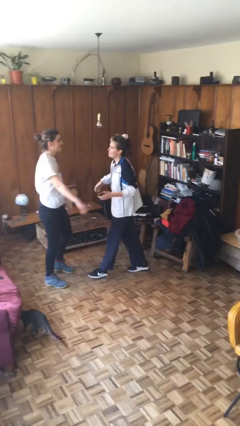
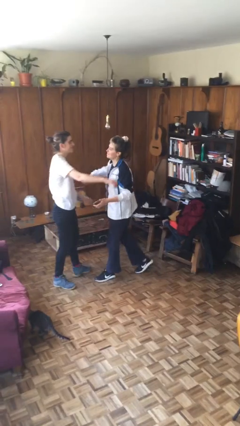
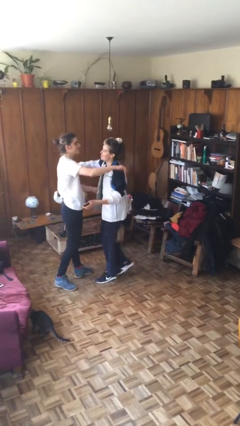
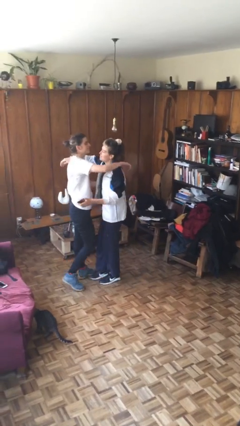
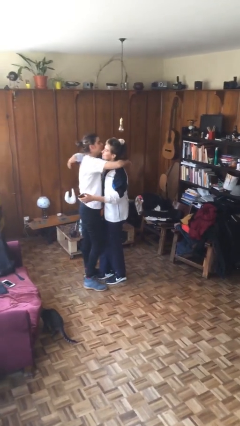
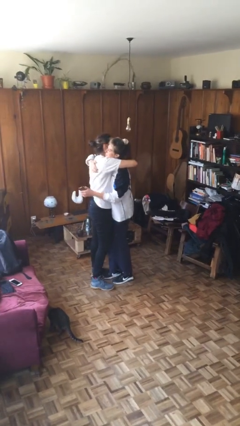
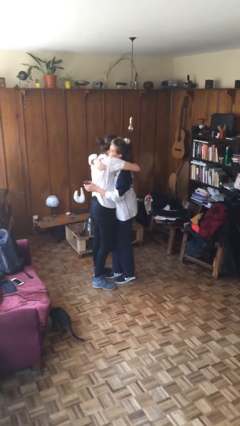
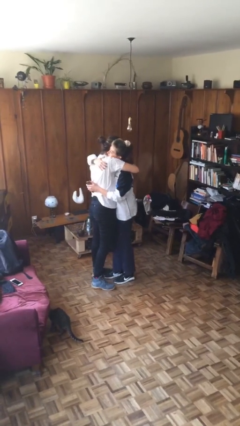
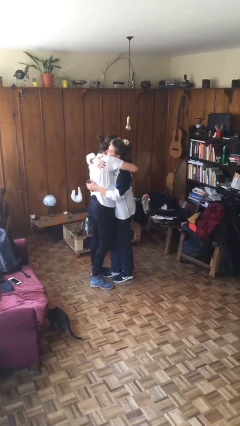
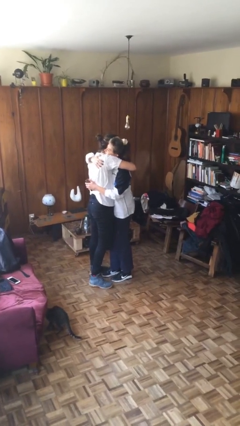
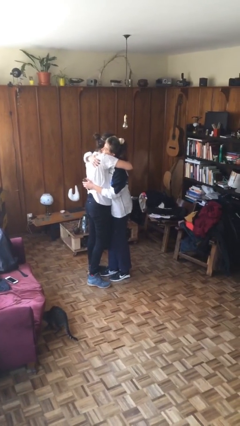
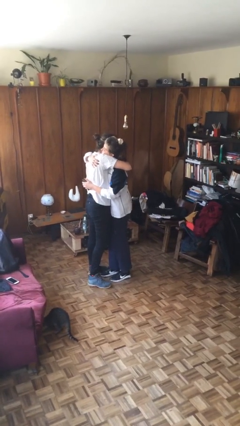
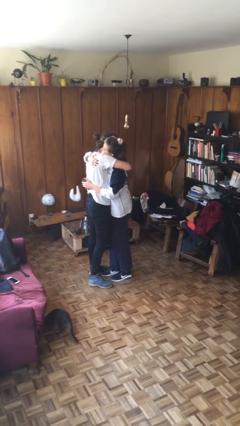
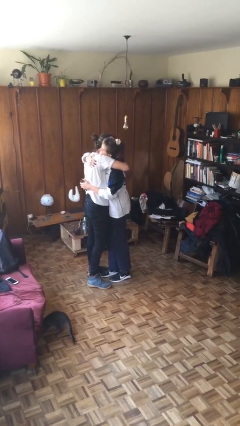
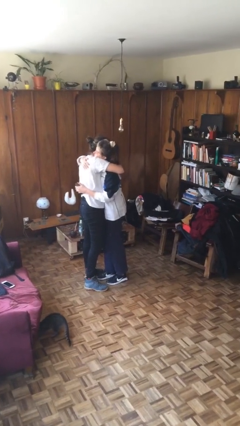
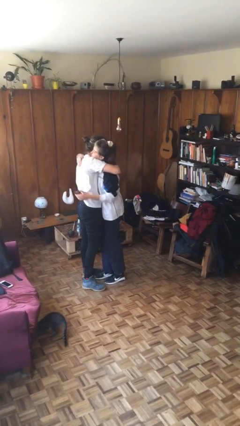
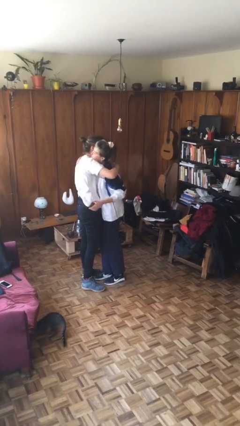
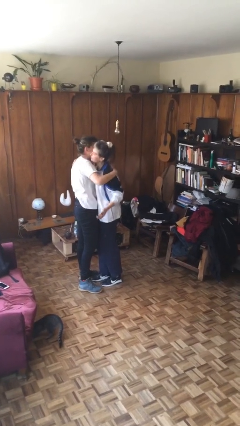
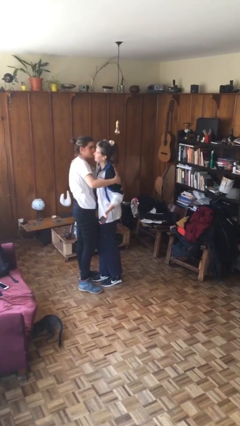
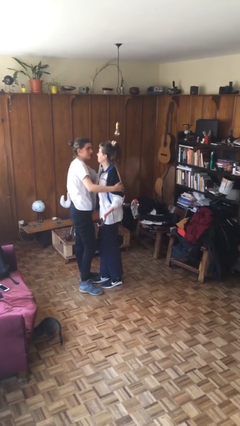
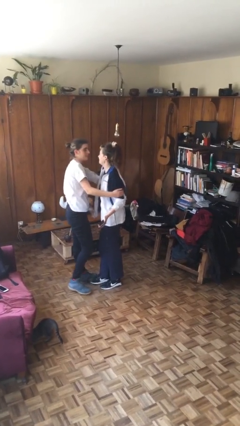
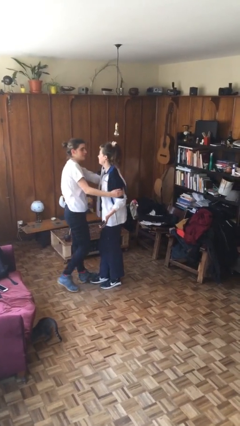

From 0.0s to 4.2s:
person embraces person

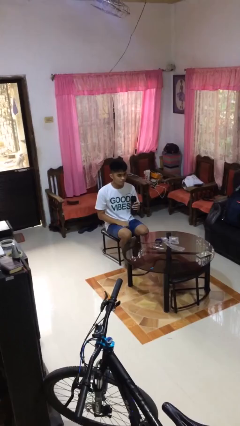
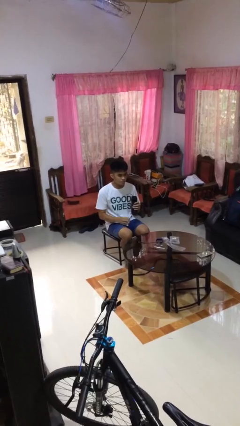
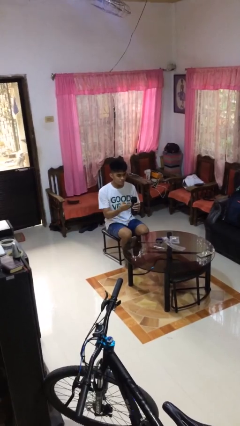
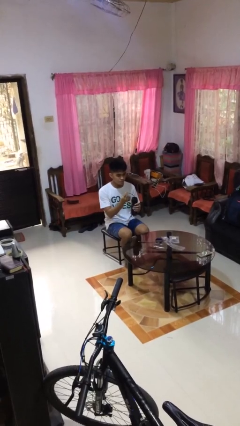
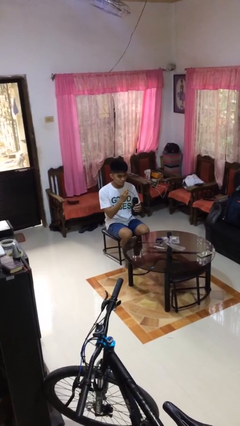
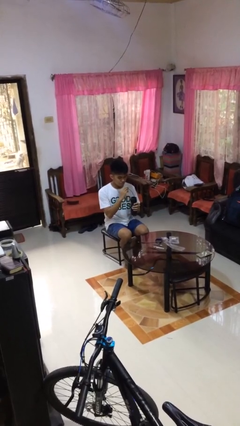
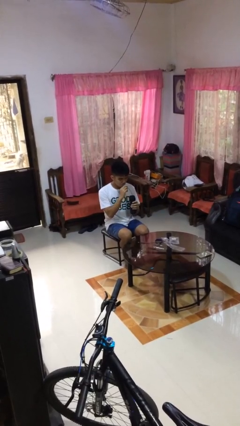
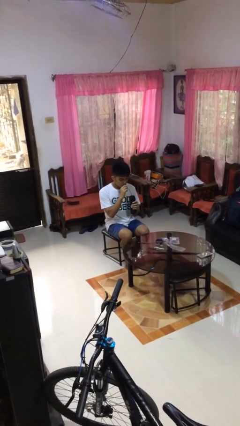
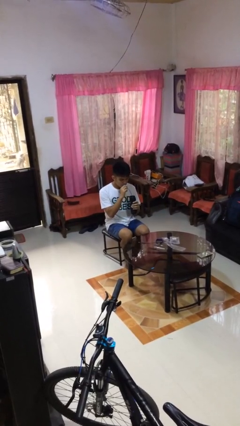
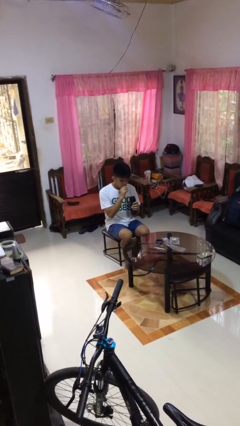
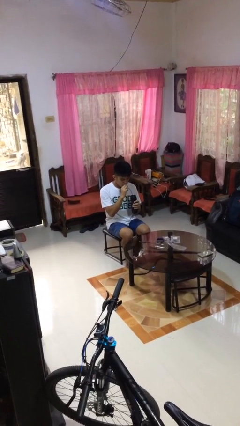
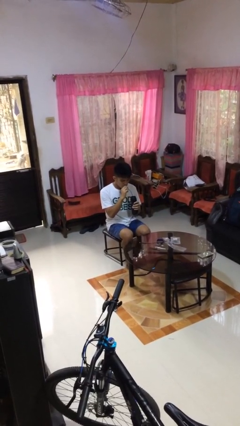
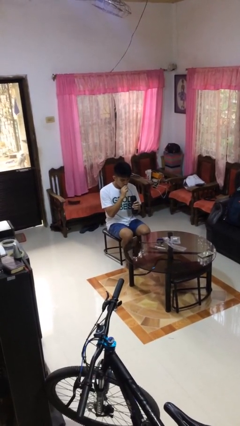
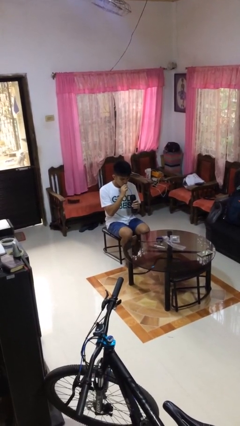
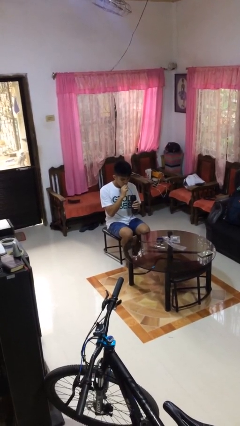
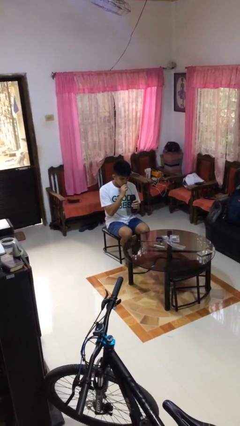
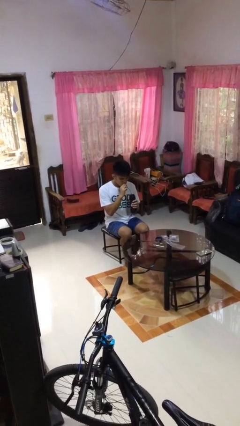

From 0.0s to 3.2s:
person drinks from straw

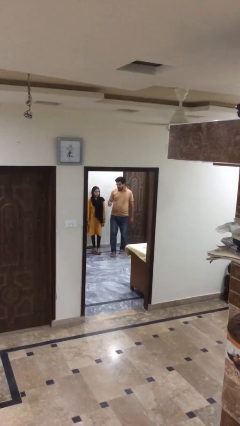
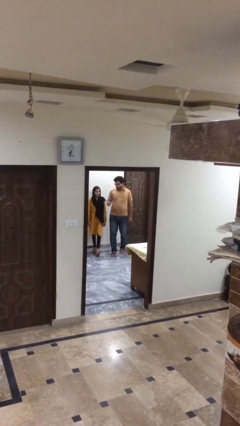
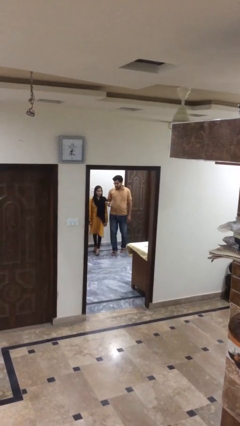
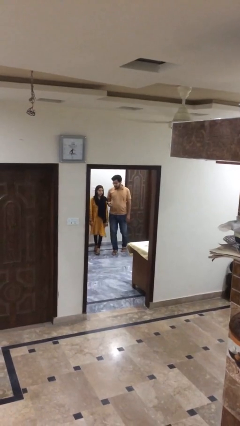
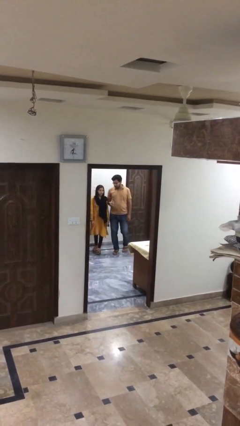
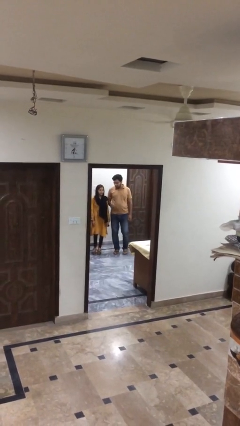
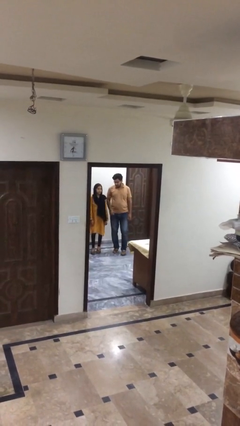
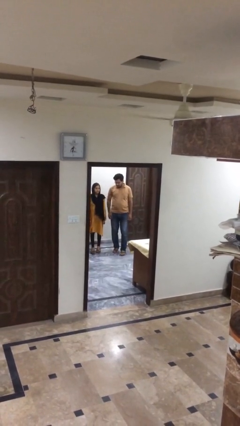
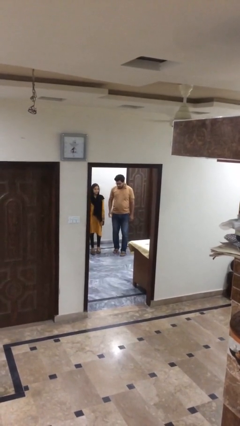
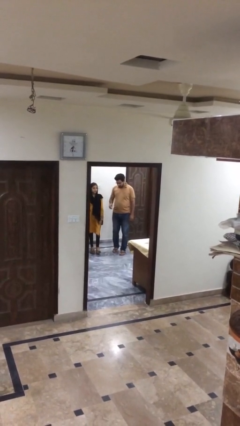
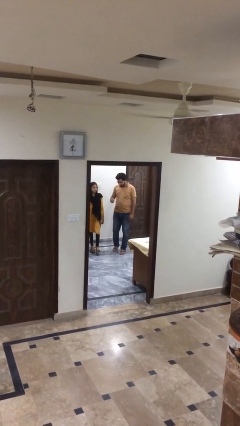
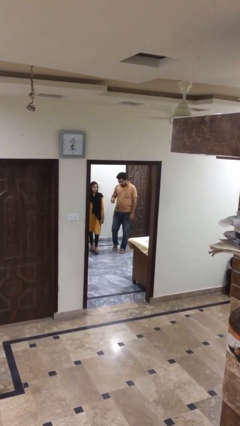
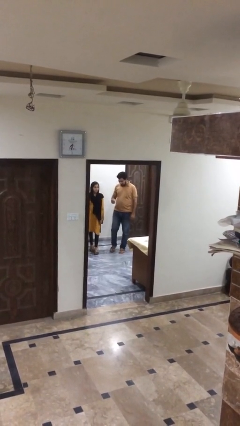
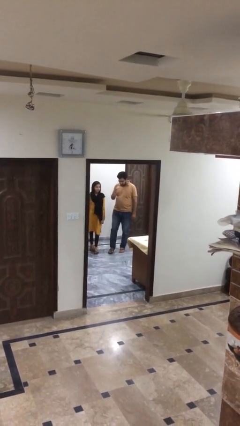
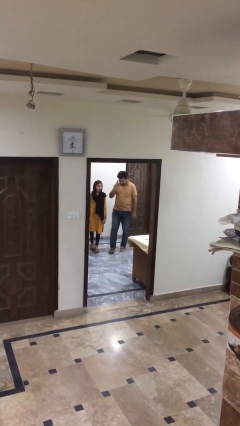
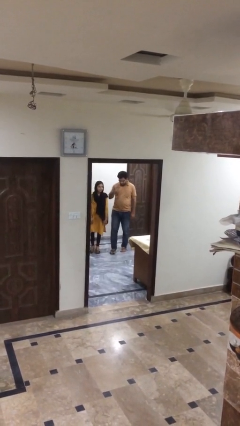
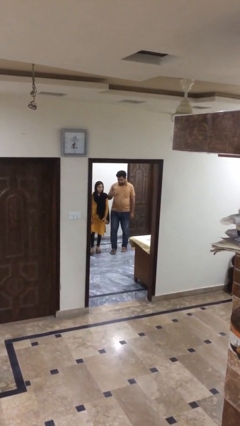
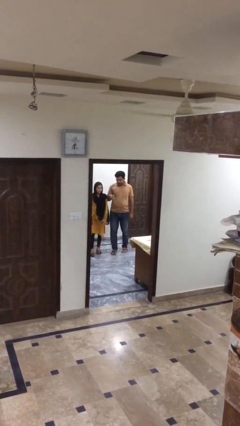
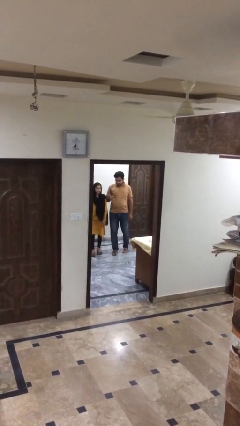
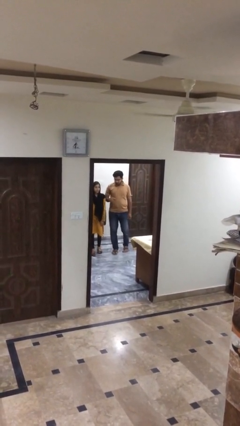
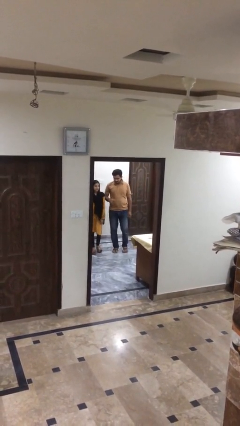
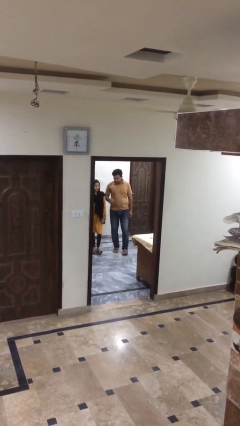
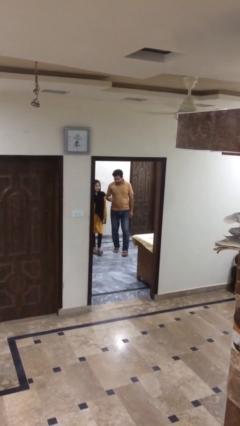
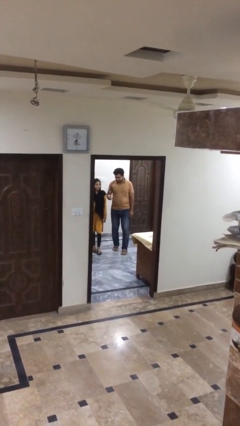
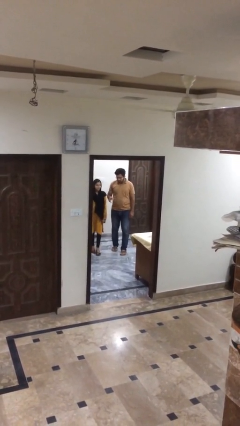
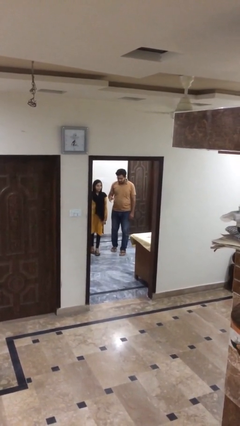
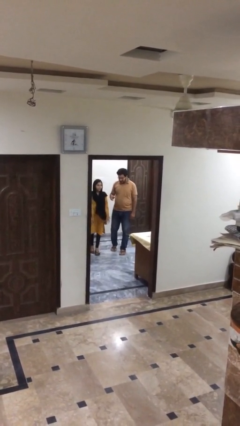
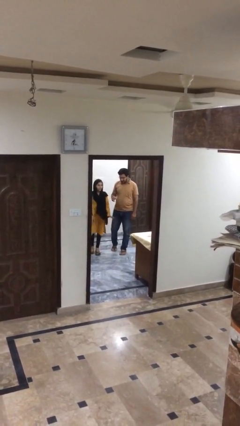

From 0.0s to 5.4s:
person talks to person

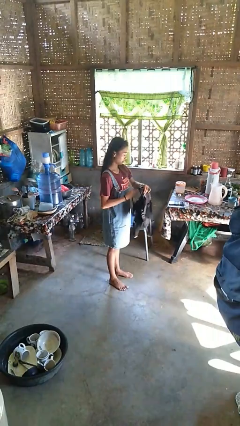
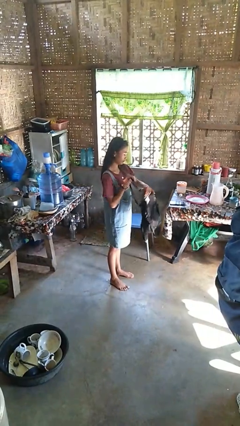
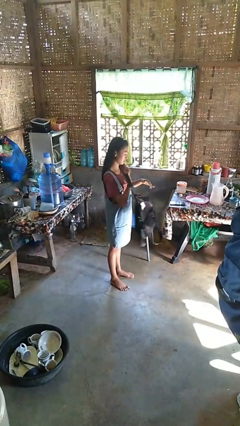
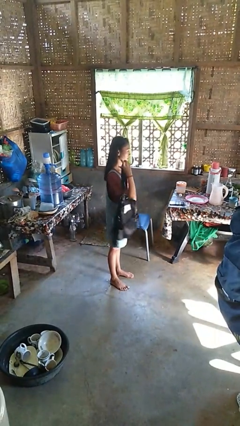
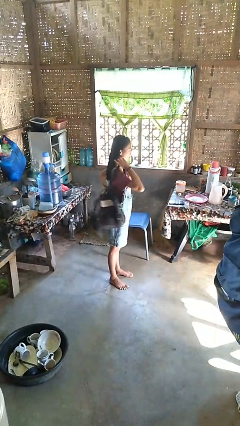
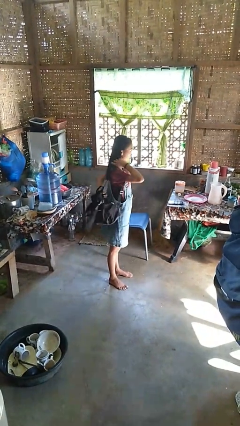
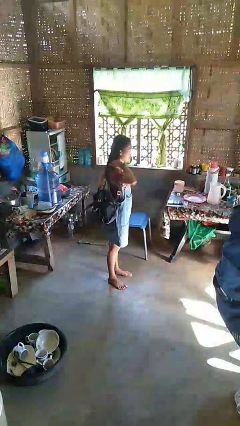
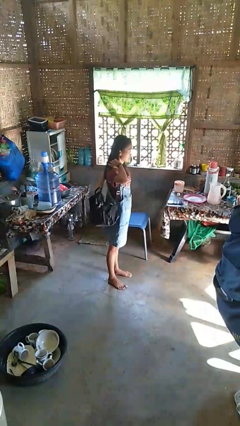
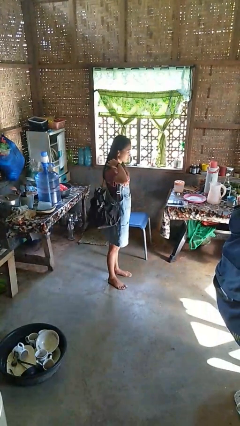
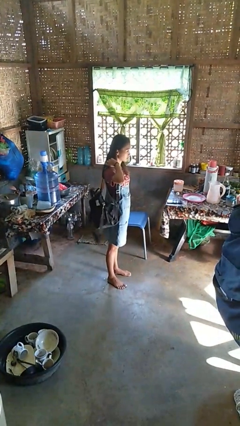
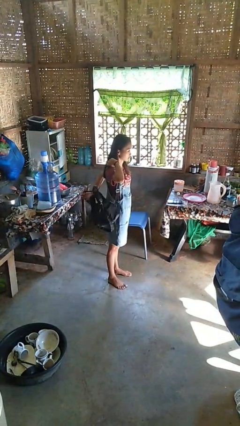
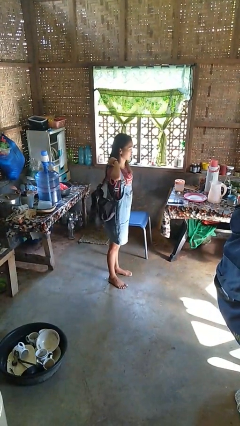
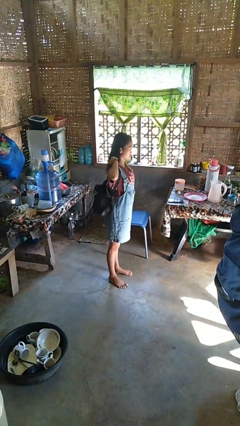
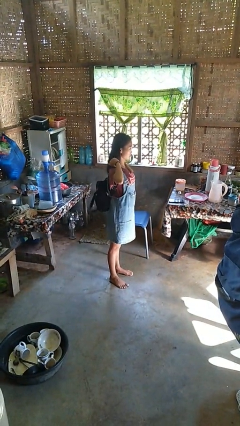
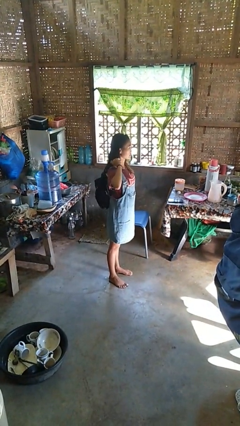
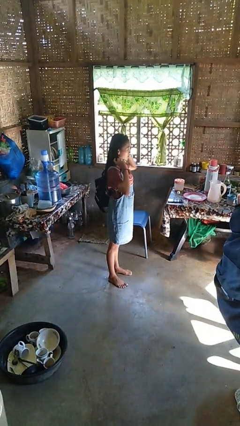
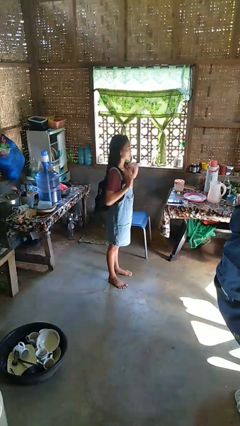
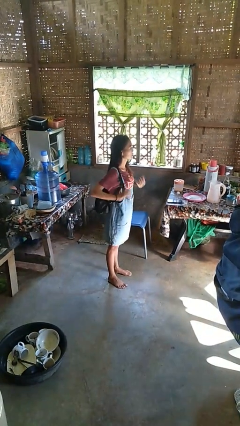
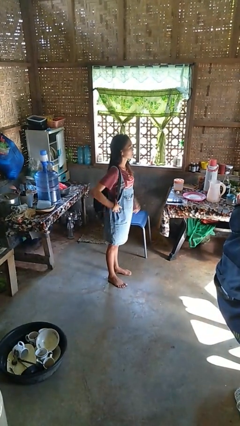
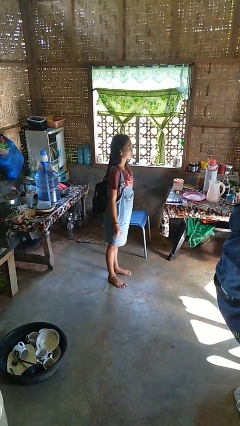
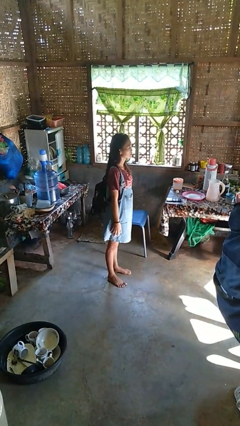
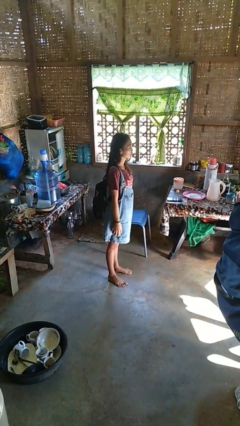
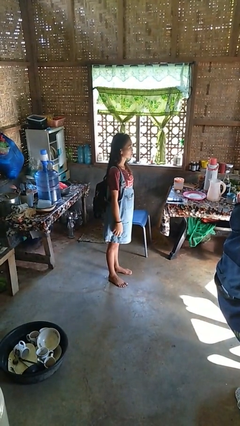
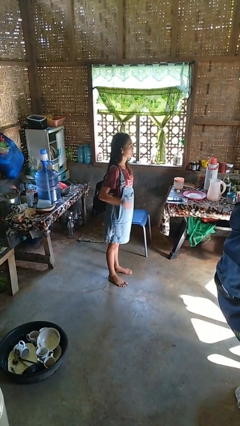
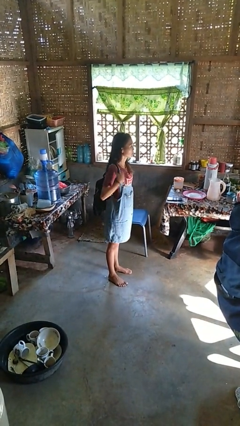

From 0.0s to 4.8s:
person puts on backpack
